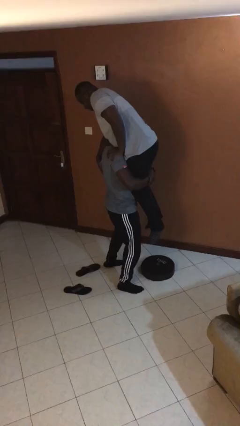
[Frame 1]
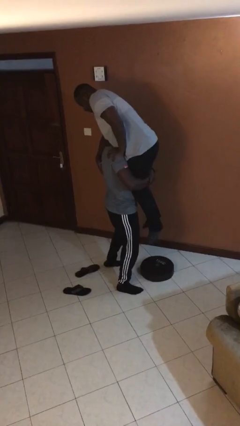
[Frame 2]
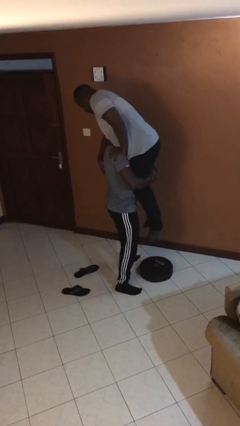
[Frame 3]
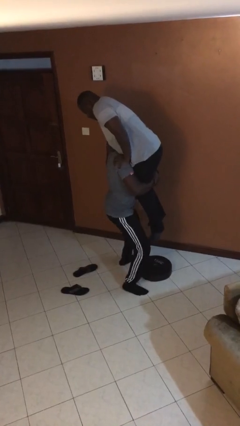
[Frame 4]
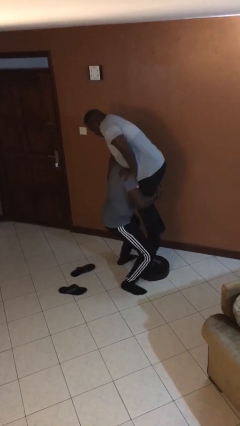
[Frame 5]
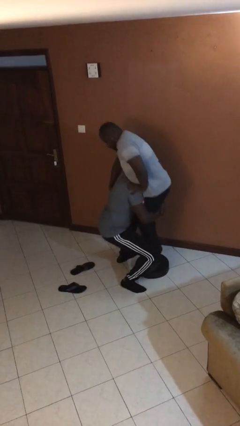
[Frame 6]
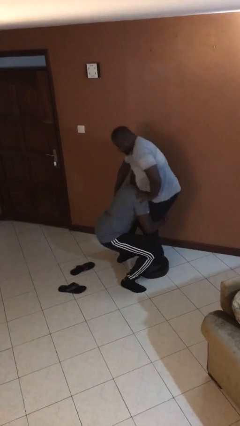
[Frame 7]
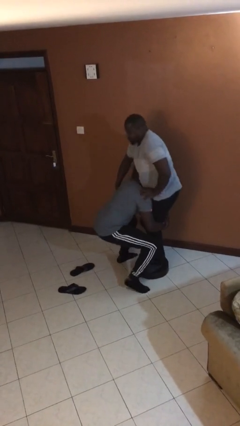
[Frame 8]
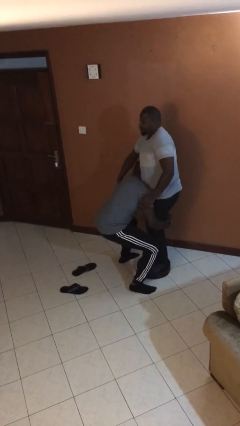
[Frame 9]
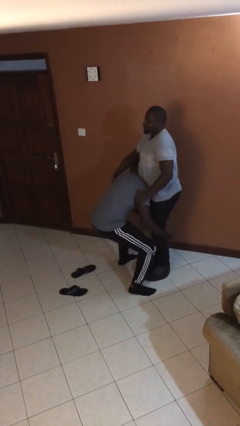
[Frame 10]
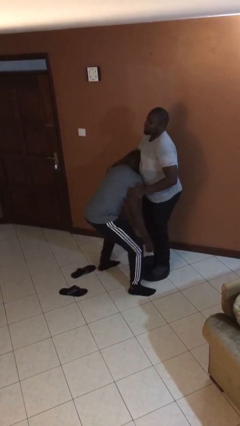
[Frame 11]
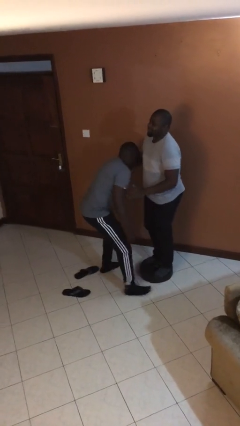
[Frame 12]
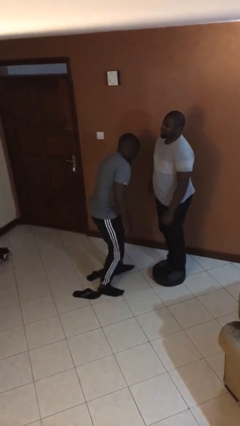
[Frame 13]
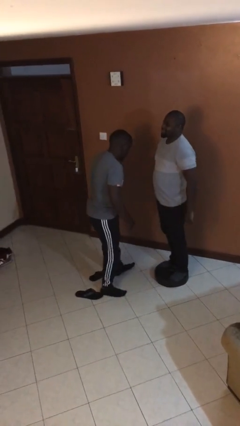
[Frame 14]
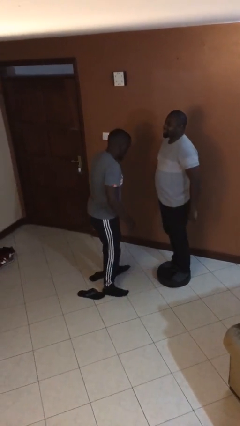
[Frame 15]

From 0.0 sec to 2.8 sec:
person puts down person

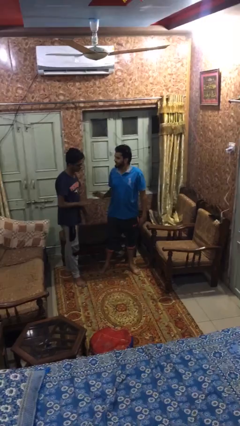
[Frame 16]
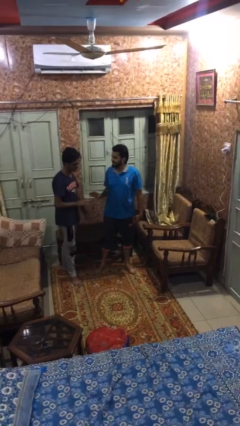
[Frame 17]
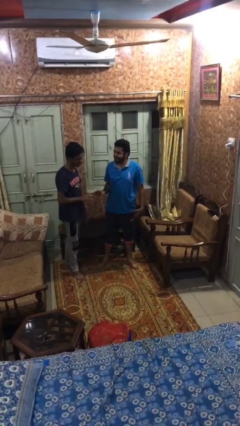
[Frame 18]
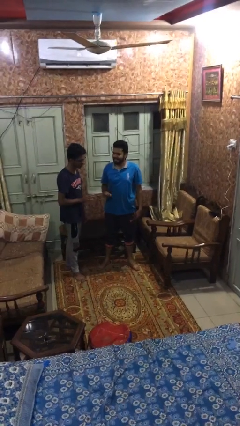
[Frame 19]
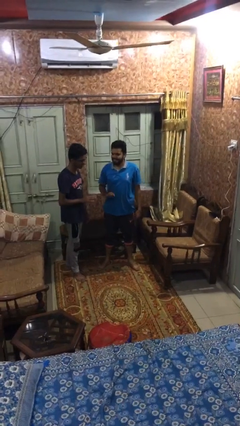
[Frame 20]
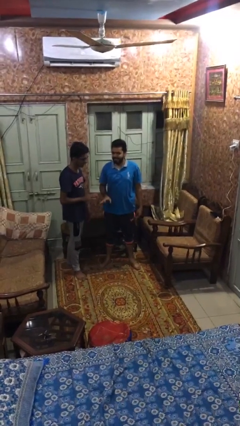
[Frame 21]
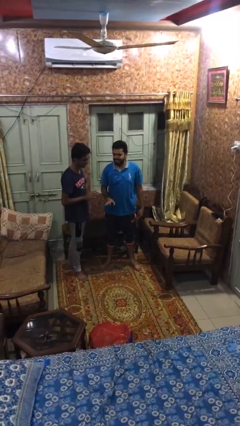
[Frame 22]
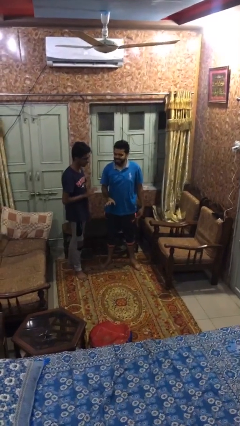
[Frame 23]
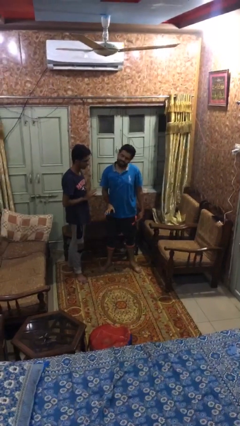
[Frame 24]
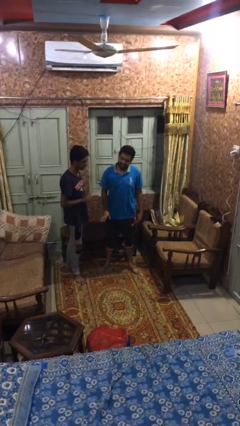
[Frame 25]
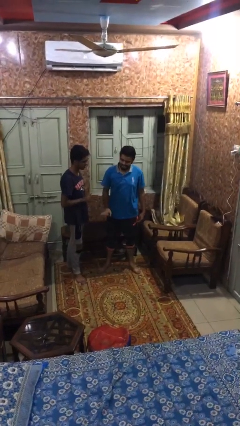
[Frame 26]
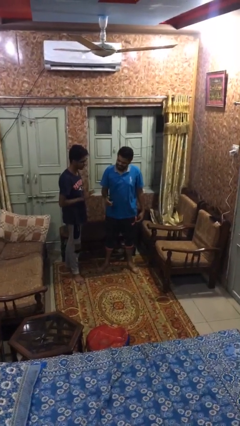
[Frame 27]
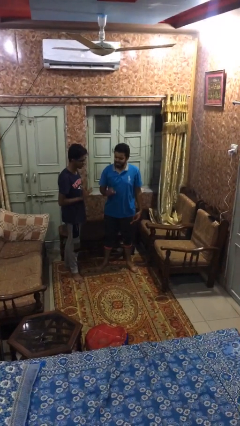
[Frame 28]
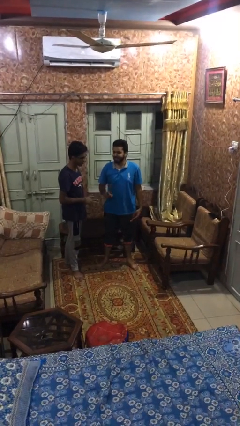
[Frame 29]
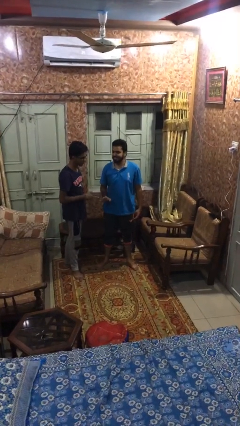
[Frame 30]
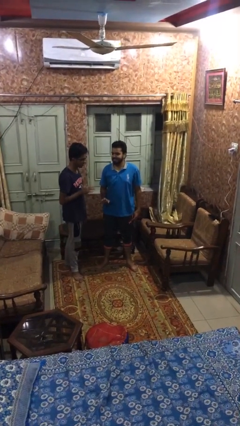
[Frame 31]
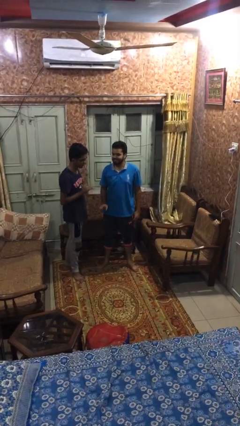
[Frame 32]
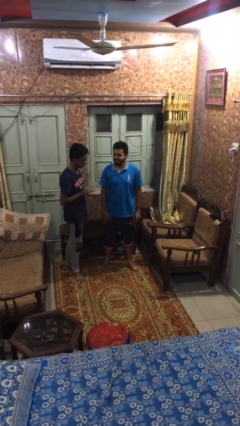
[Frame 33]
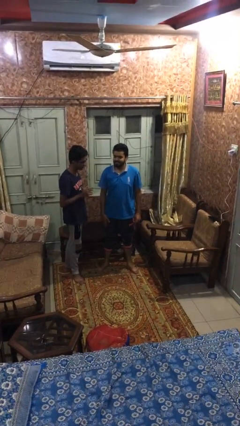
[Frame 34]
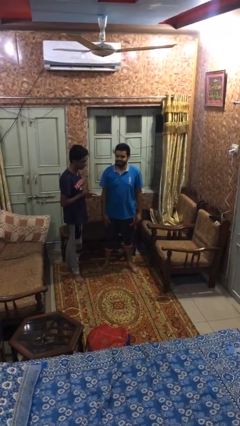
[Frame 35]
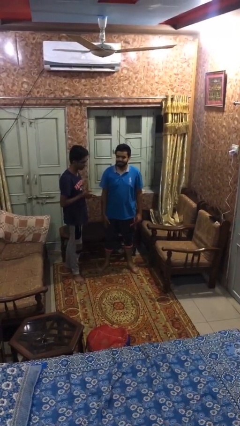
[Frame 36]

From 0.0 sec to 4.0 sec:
person talks to person

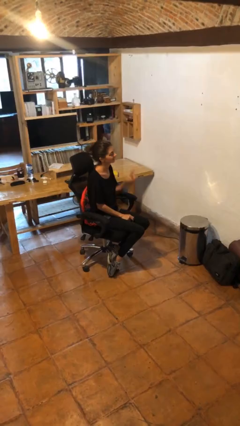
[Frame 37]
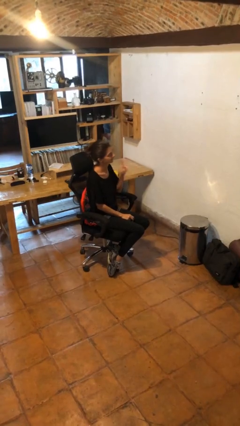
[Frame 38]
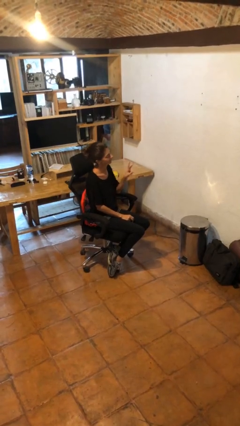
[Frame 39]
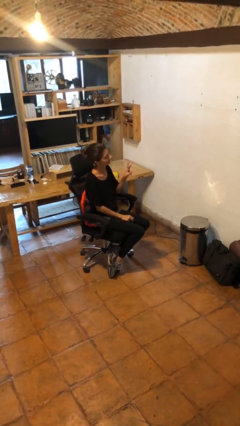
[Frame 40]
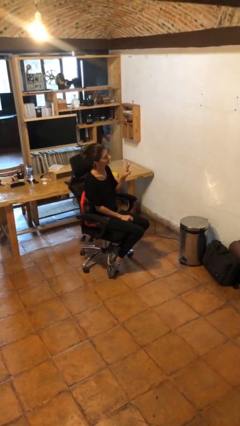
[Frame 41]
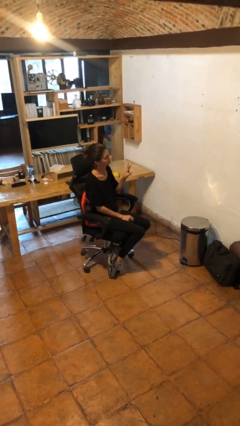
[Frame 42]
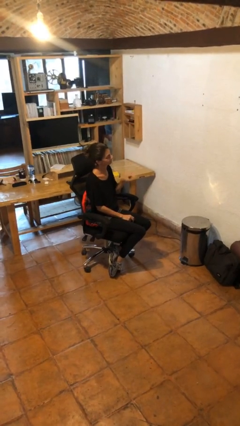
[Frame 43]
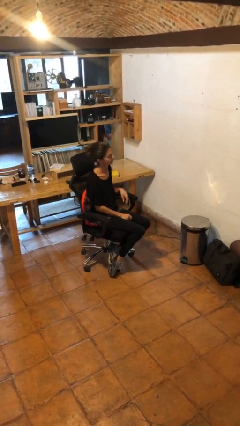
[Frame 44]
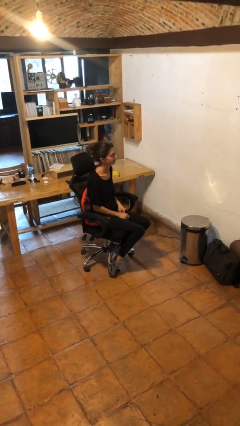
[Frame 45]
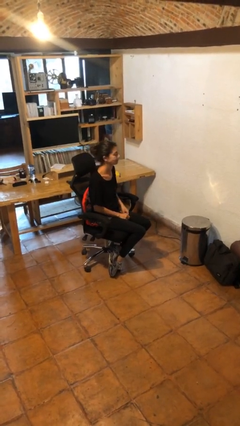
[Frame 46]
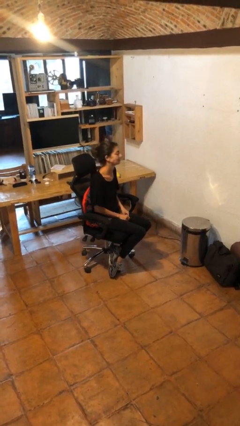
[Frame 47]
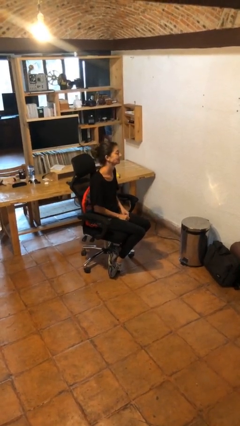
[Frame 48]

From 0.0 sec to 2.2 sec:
person gestures peace

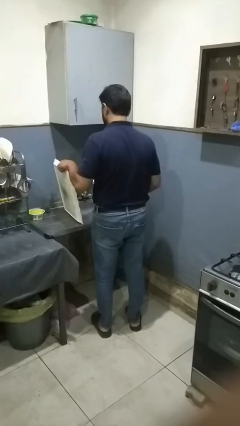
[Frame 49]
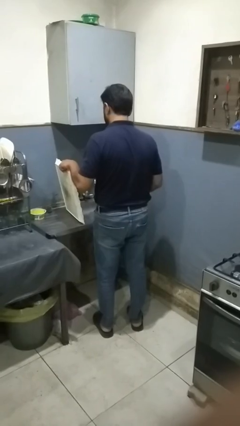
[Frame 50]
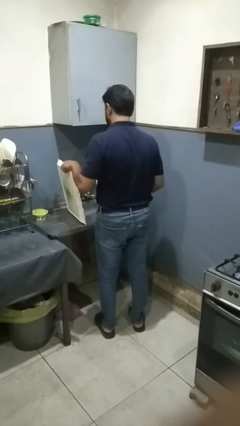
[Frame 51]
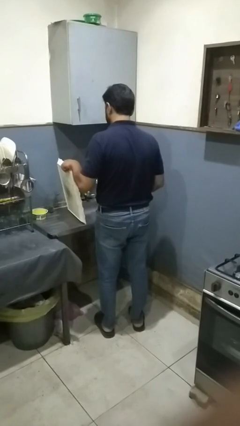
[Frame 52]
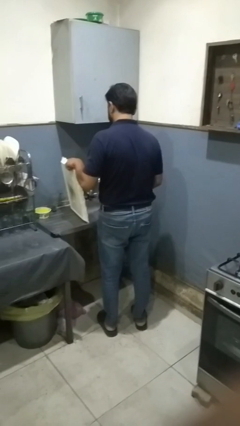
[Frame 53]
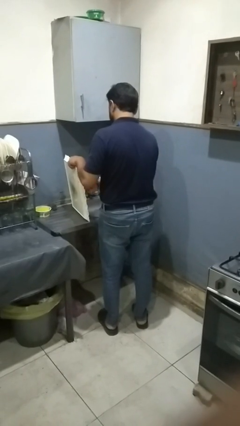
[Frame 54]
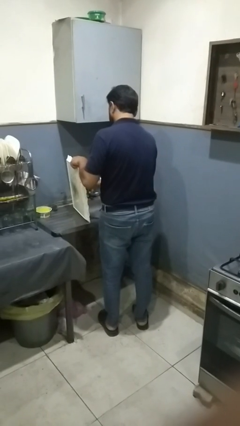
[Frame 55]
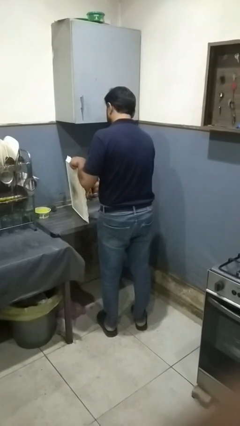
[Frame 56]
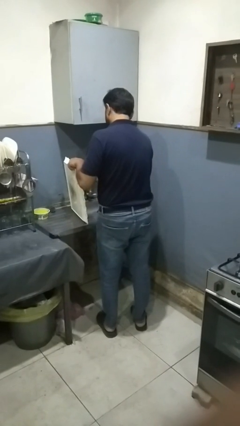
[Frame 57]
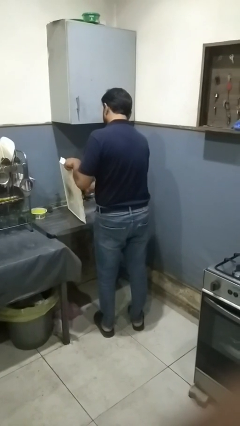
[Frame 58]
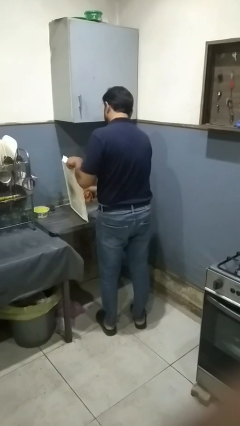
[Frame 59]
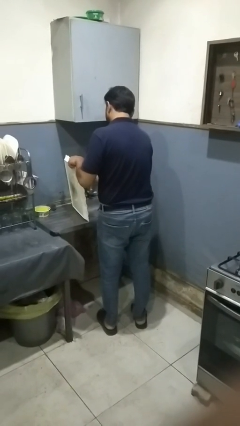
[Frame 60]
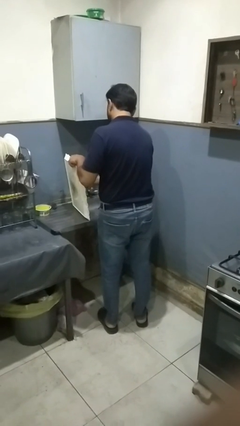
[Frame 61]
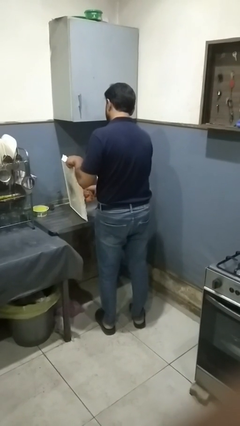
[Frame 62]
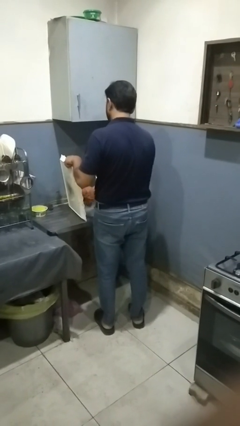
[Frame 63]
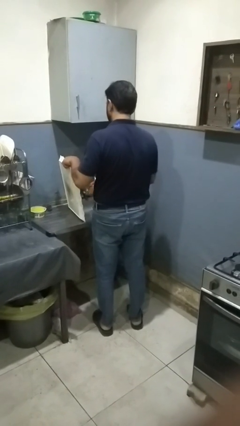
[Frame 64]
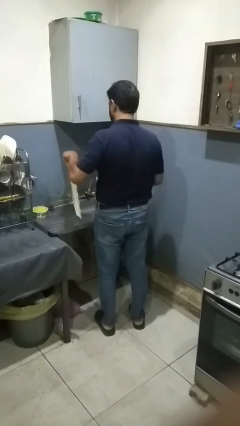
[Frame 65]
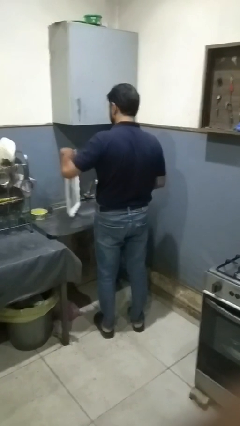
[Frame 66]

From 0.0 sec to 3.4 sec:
person dries dish

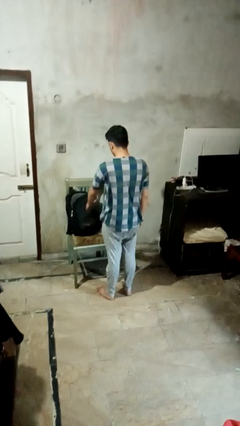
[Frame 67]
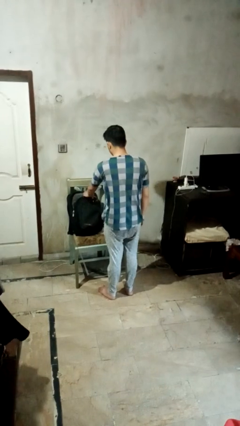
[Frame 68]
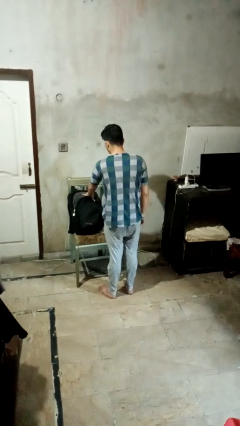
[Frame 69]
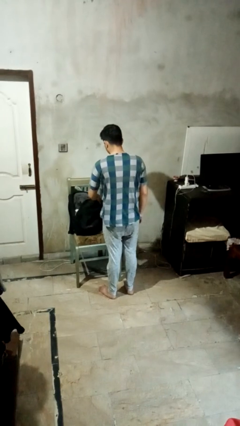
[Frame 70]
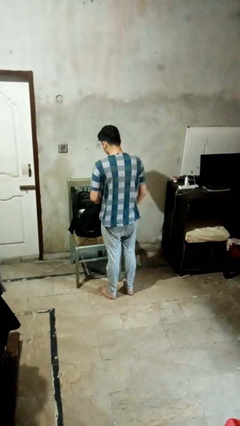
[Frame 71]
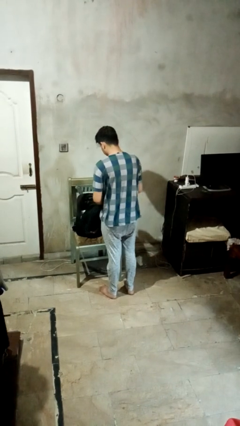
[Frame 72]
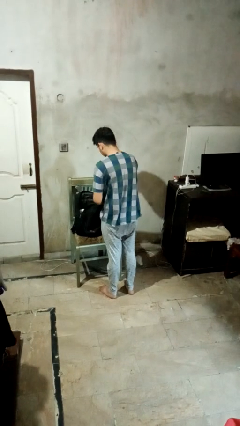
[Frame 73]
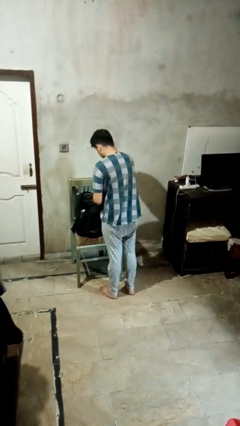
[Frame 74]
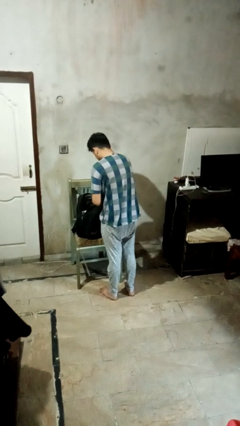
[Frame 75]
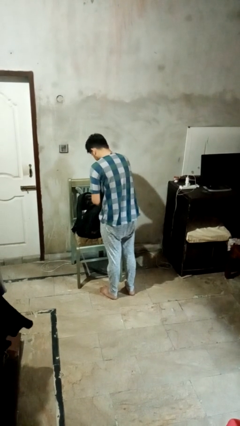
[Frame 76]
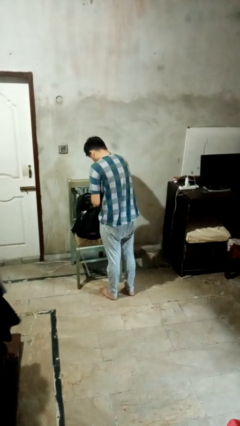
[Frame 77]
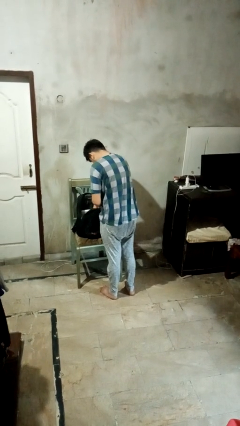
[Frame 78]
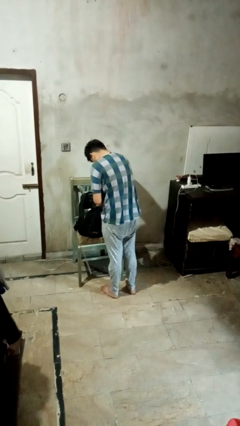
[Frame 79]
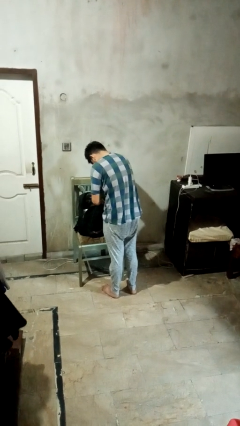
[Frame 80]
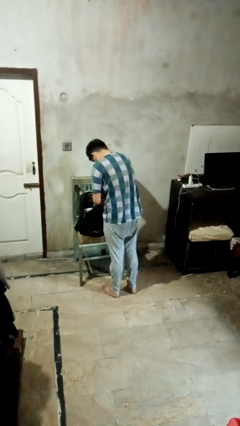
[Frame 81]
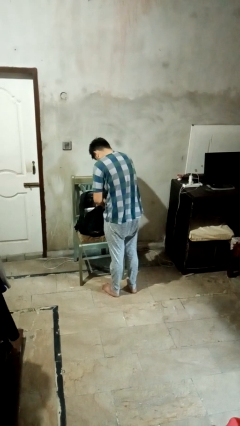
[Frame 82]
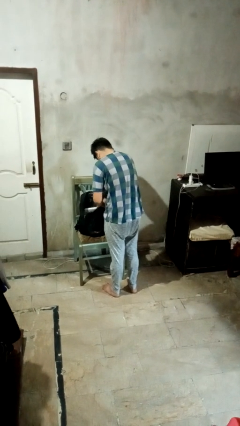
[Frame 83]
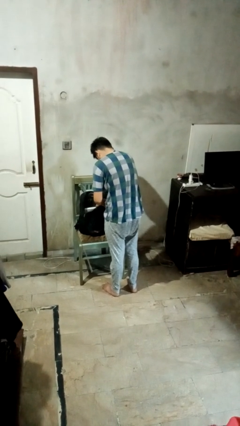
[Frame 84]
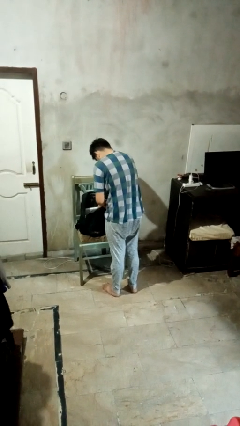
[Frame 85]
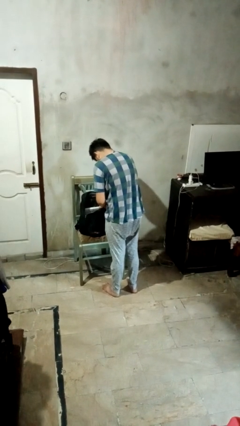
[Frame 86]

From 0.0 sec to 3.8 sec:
person searches in backpack

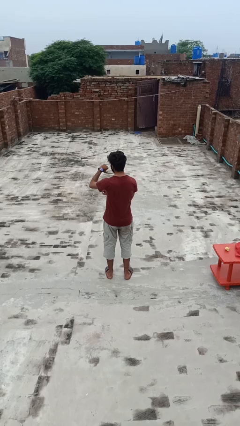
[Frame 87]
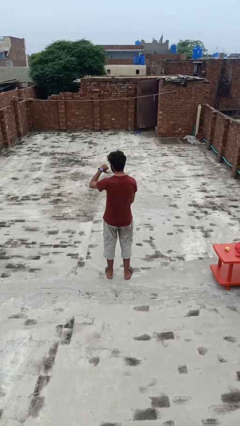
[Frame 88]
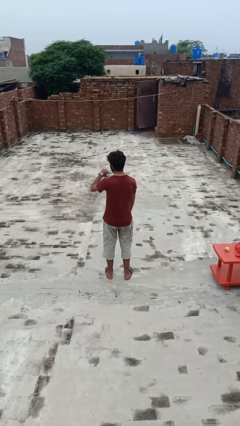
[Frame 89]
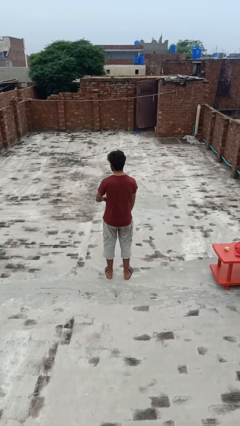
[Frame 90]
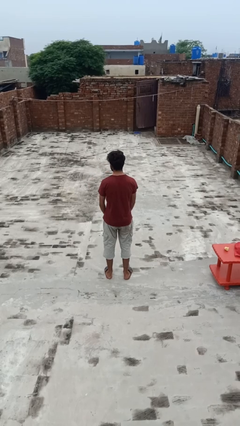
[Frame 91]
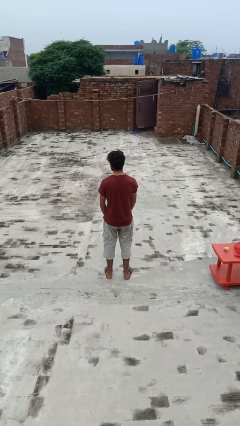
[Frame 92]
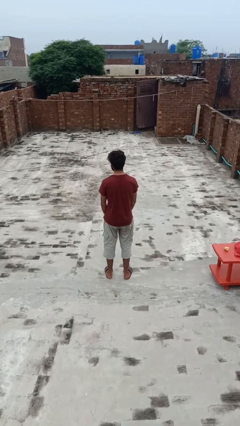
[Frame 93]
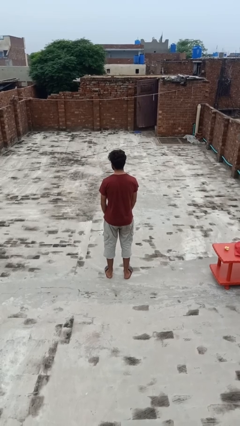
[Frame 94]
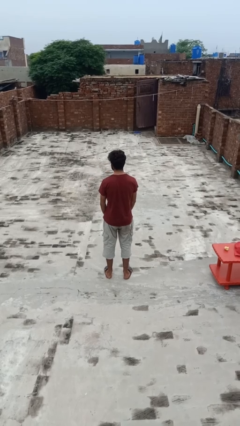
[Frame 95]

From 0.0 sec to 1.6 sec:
person gestures watch closely
